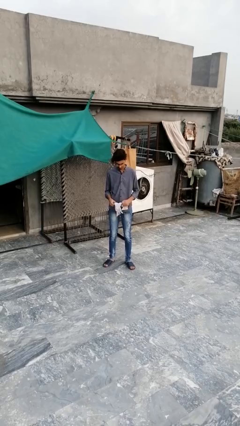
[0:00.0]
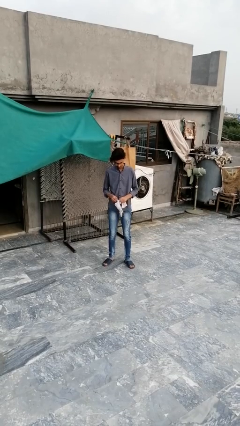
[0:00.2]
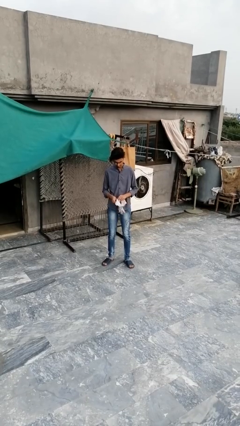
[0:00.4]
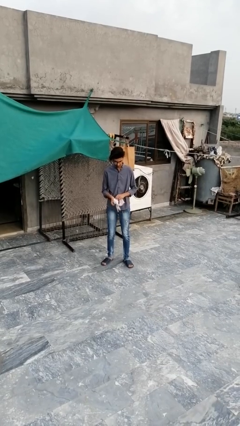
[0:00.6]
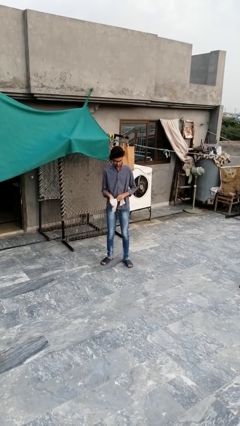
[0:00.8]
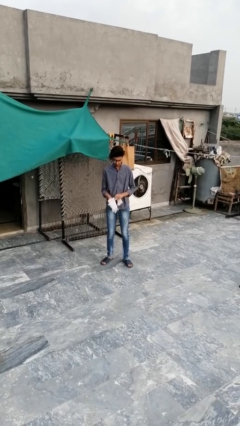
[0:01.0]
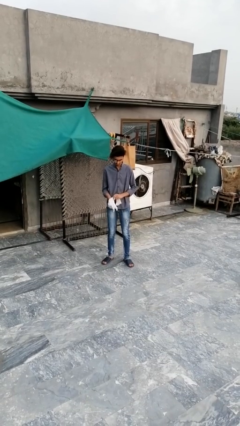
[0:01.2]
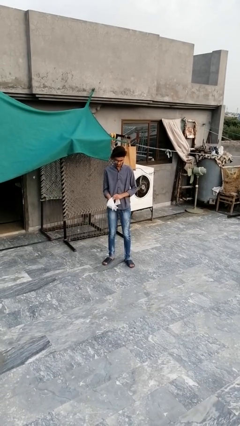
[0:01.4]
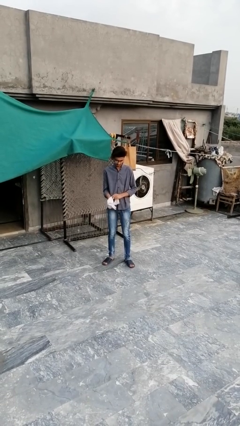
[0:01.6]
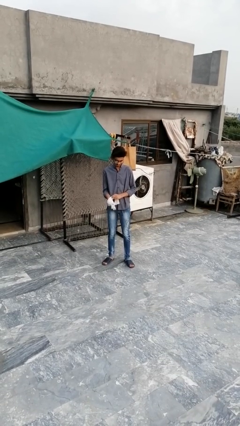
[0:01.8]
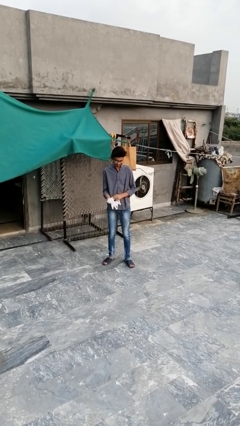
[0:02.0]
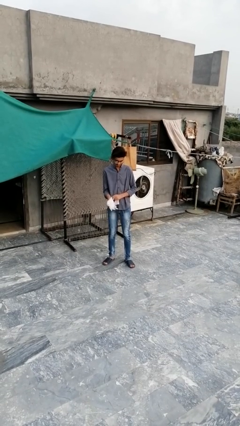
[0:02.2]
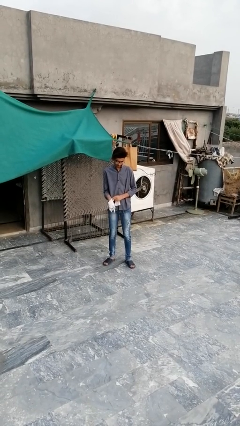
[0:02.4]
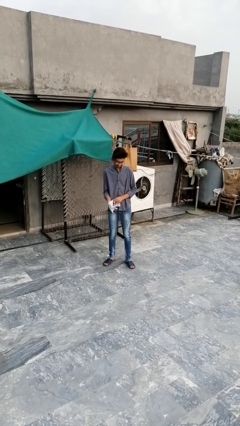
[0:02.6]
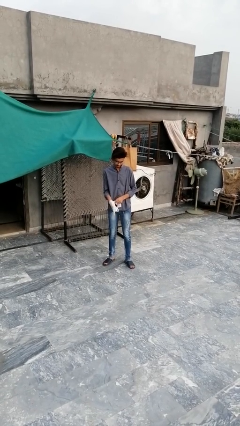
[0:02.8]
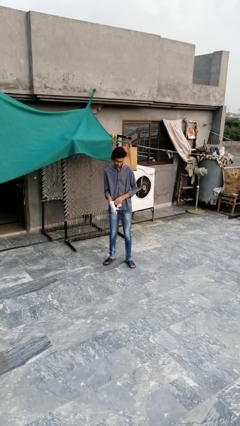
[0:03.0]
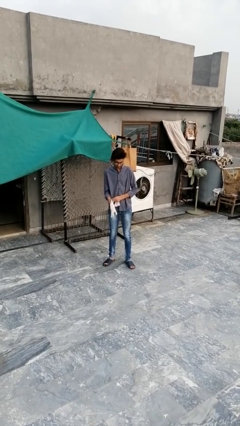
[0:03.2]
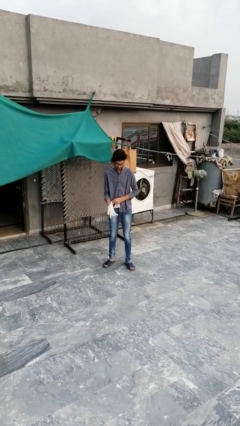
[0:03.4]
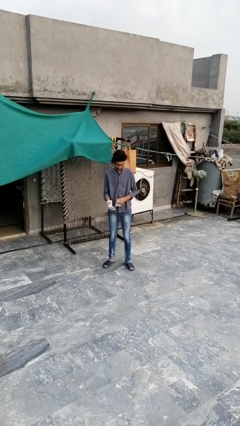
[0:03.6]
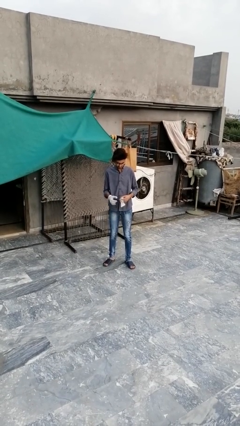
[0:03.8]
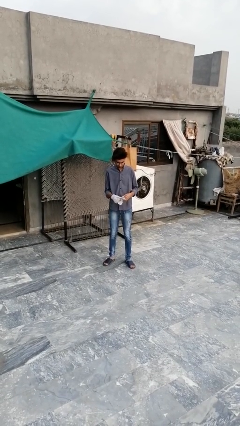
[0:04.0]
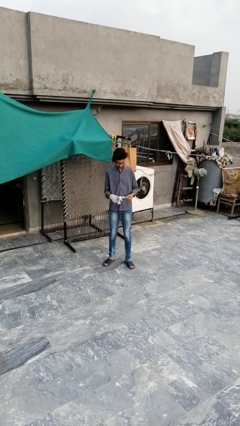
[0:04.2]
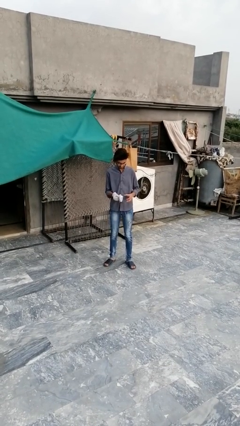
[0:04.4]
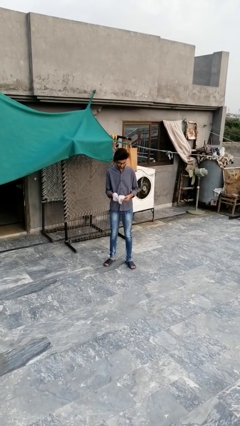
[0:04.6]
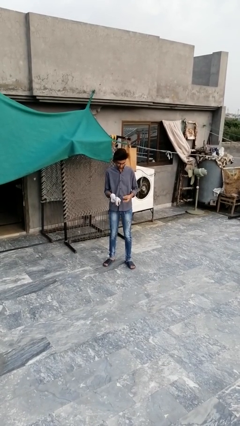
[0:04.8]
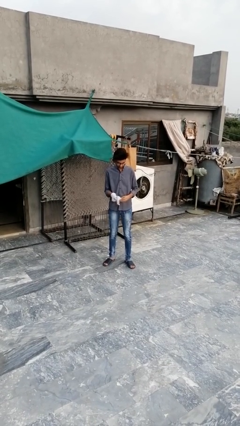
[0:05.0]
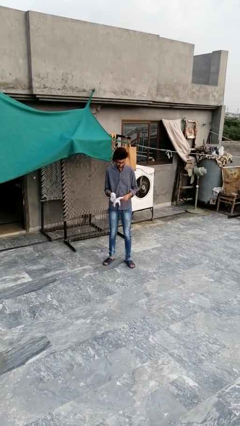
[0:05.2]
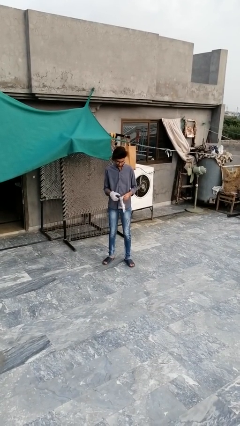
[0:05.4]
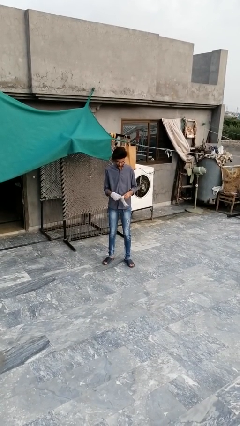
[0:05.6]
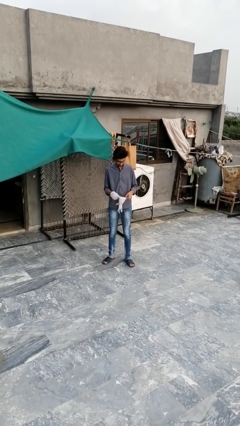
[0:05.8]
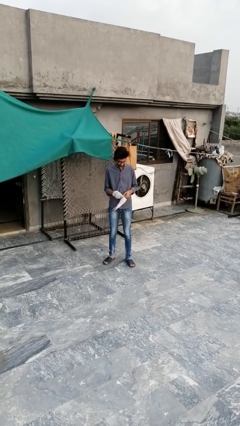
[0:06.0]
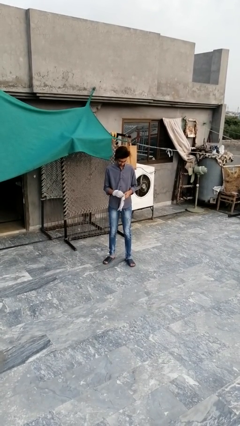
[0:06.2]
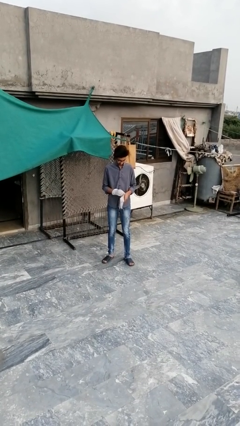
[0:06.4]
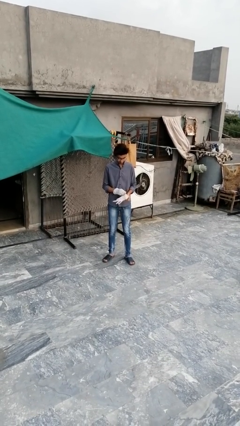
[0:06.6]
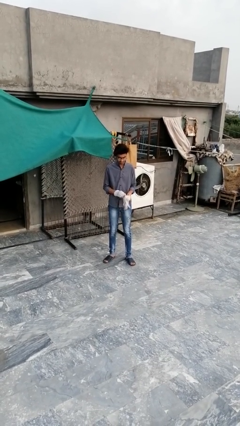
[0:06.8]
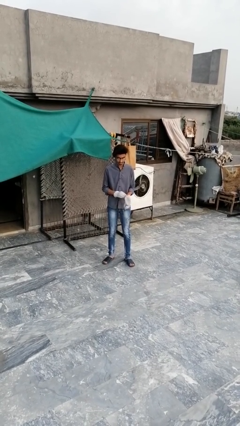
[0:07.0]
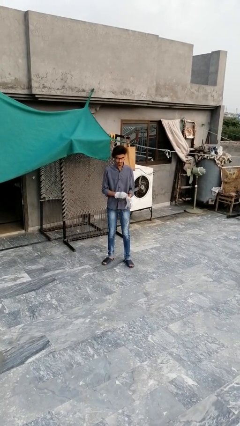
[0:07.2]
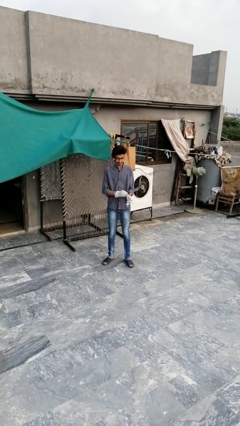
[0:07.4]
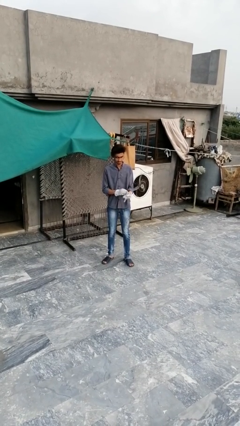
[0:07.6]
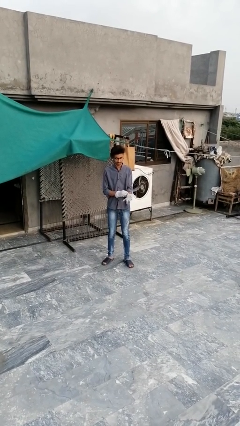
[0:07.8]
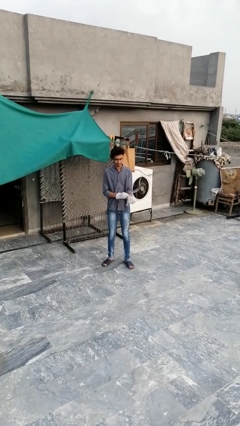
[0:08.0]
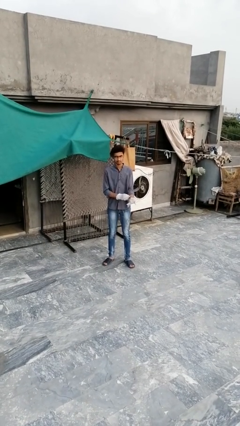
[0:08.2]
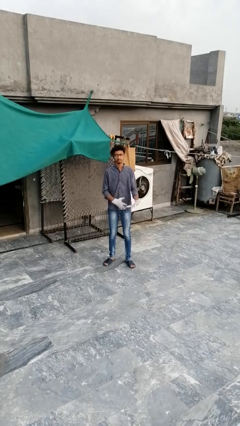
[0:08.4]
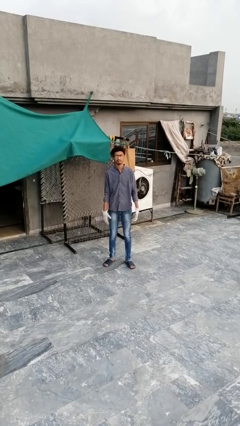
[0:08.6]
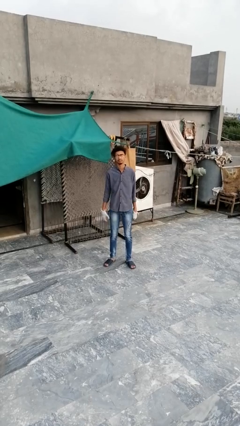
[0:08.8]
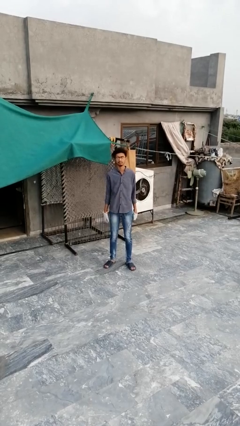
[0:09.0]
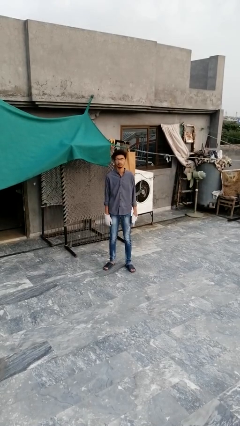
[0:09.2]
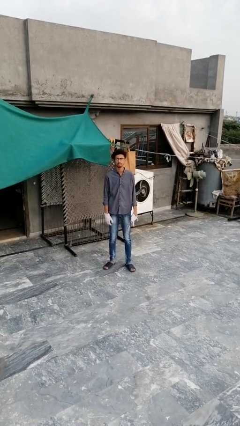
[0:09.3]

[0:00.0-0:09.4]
person puts on gloves

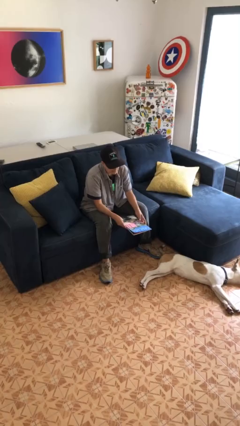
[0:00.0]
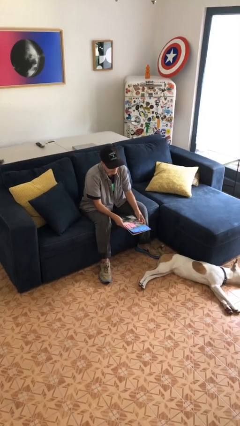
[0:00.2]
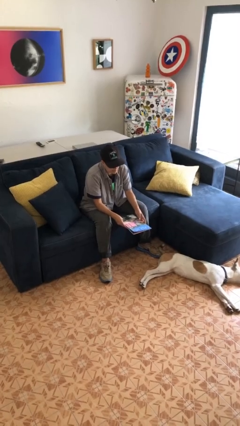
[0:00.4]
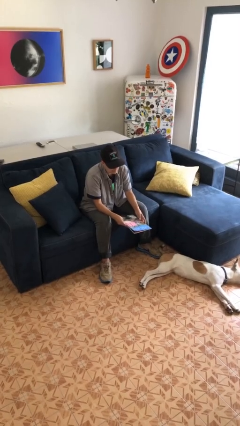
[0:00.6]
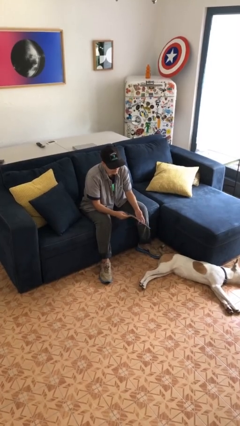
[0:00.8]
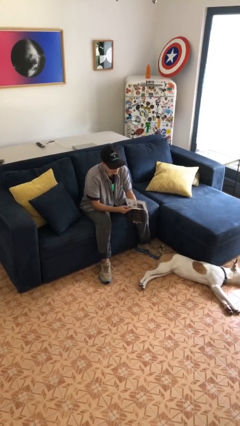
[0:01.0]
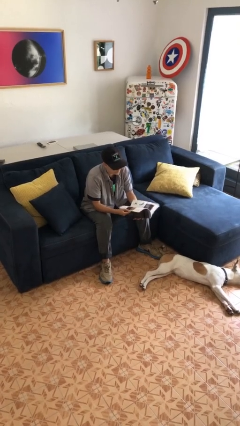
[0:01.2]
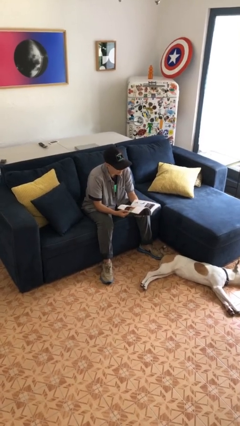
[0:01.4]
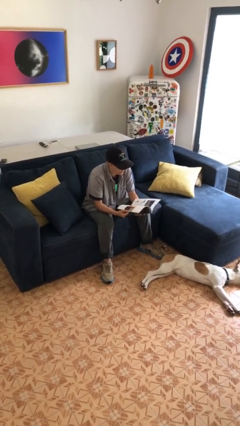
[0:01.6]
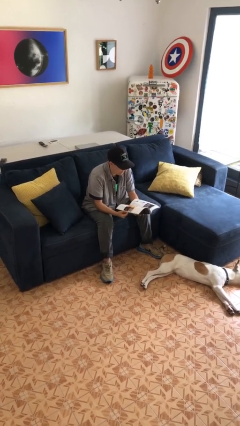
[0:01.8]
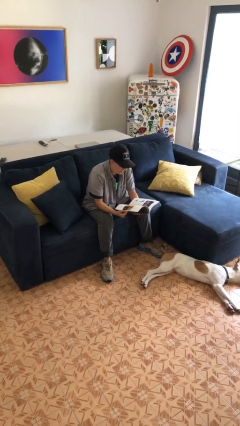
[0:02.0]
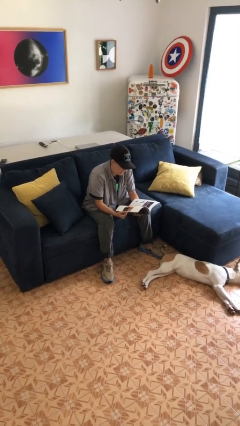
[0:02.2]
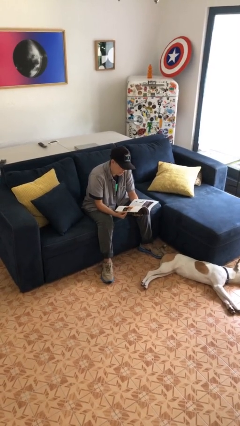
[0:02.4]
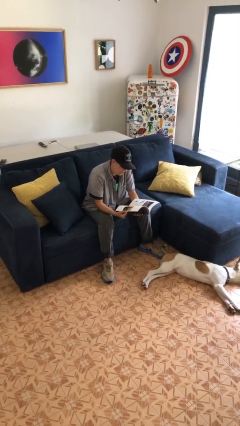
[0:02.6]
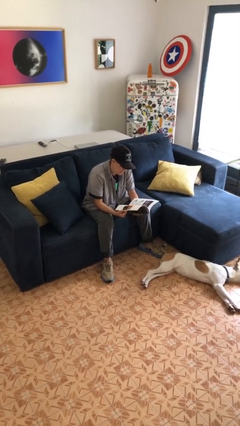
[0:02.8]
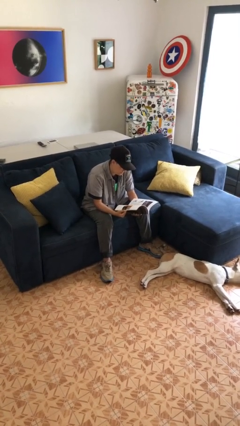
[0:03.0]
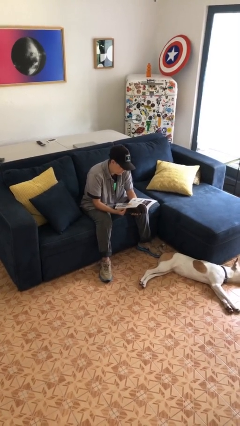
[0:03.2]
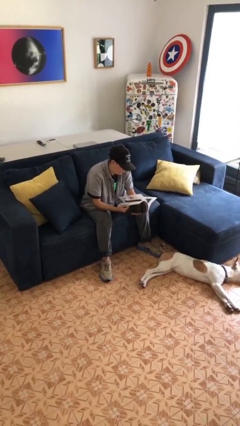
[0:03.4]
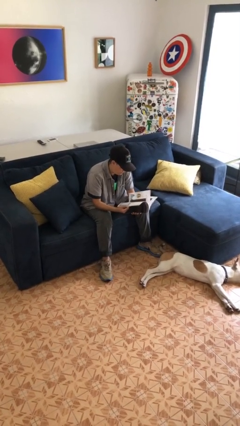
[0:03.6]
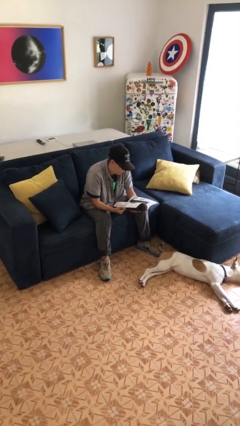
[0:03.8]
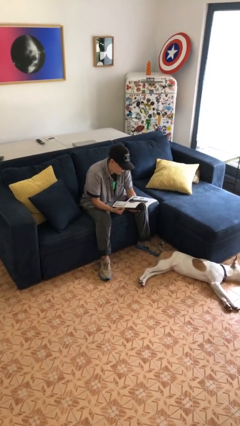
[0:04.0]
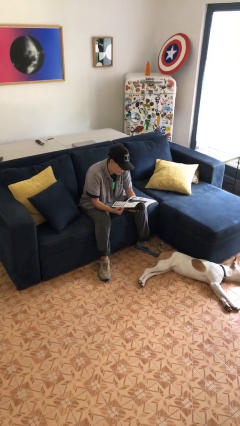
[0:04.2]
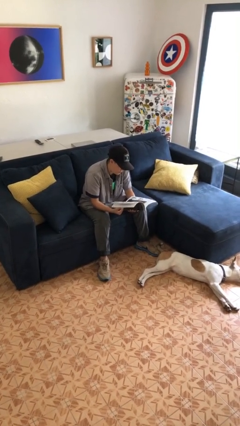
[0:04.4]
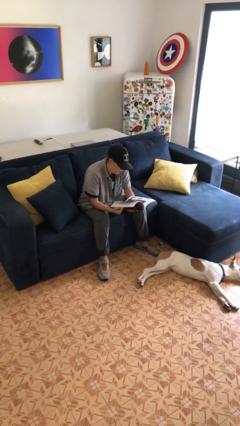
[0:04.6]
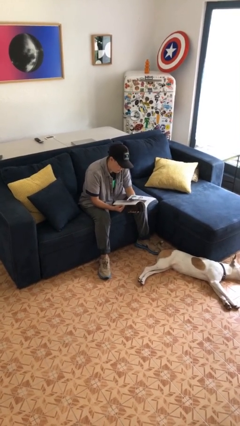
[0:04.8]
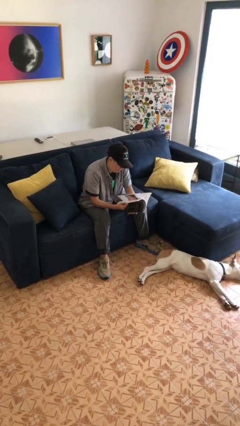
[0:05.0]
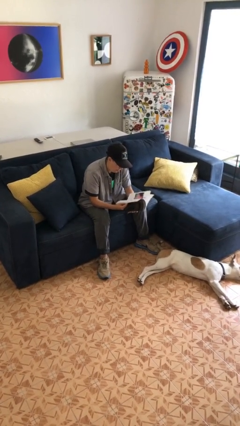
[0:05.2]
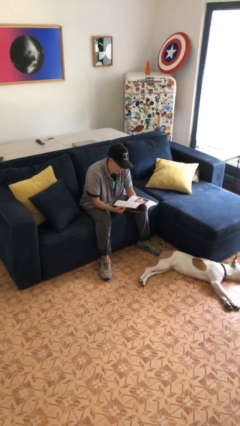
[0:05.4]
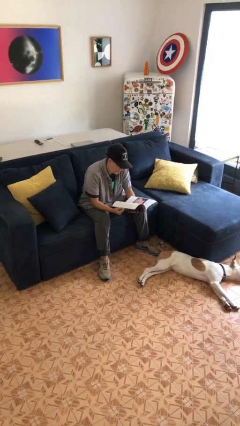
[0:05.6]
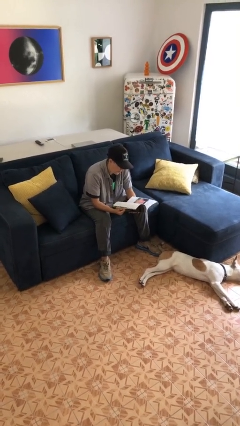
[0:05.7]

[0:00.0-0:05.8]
person reads magazine

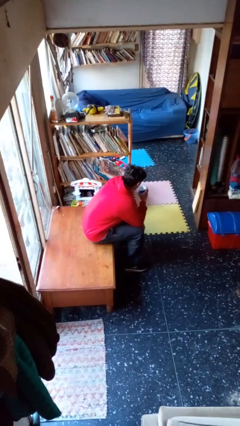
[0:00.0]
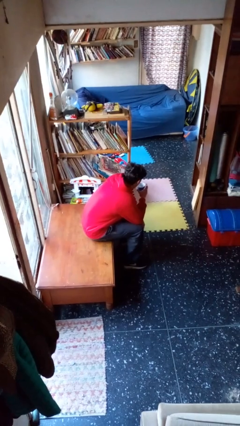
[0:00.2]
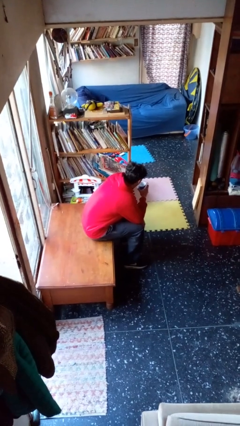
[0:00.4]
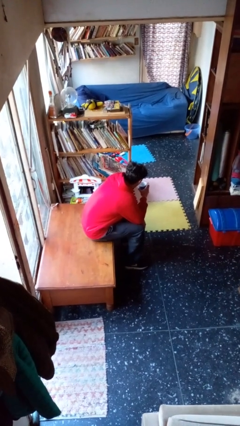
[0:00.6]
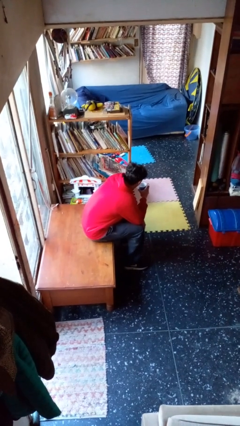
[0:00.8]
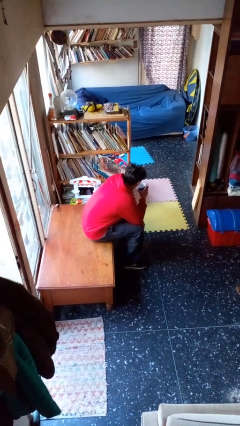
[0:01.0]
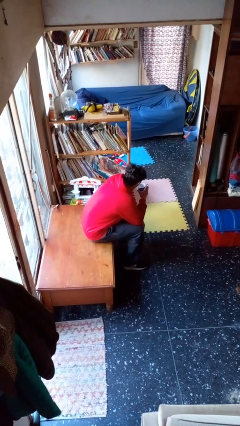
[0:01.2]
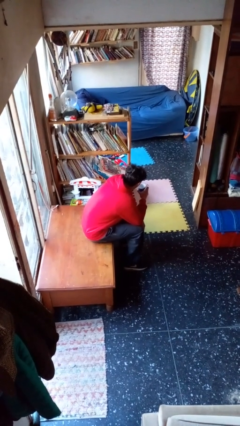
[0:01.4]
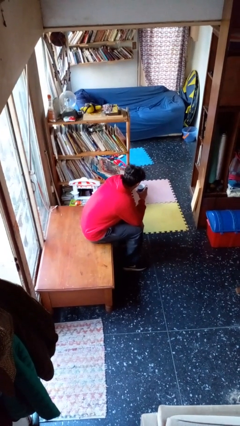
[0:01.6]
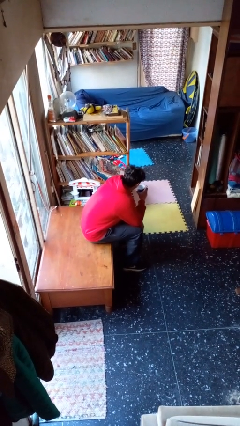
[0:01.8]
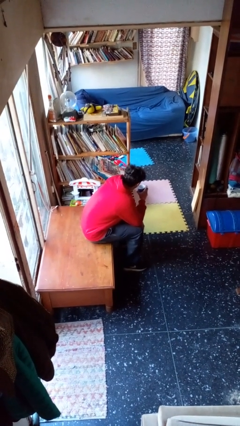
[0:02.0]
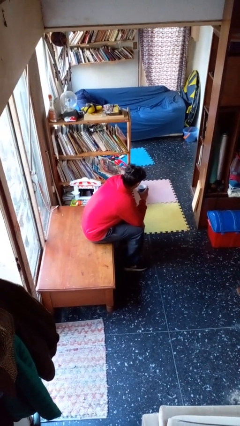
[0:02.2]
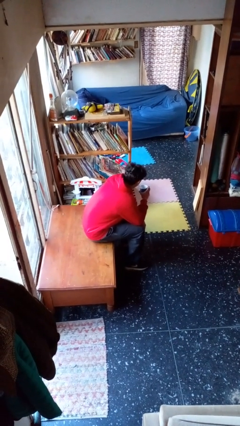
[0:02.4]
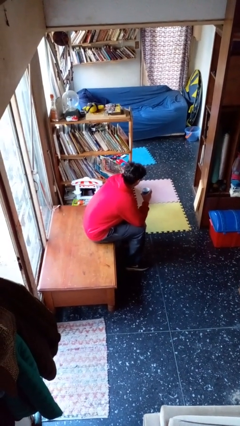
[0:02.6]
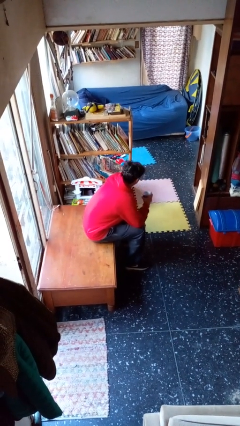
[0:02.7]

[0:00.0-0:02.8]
person drinks from straw
